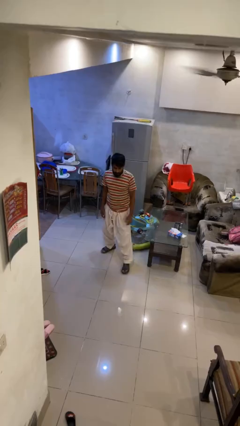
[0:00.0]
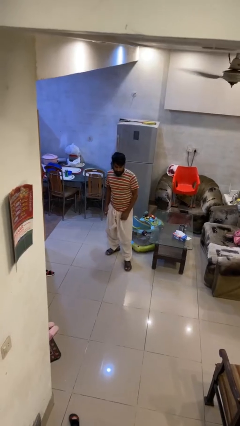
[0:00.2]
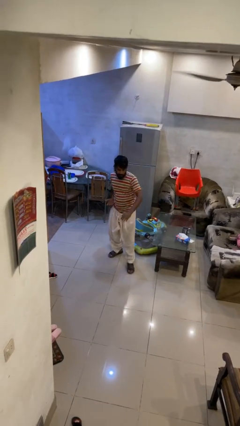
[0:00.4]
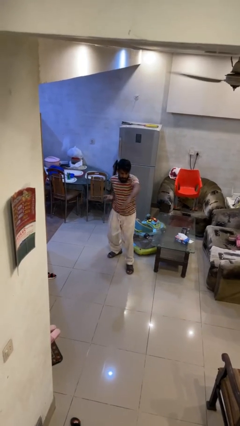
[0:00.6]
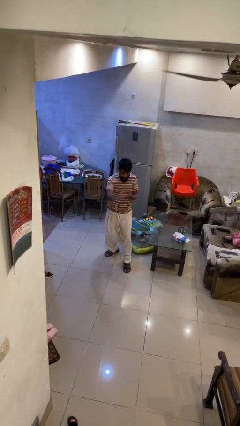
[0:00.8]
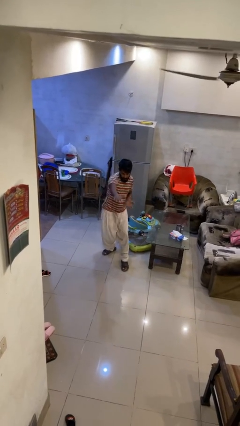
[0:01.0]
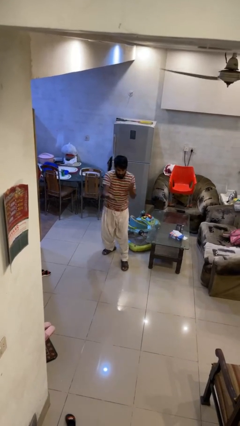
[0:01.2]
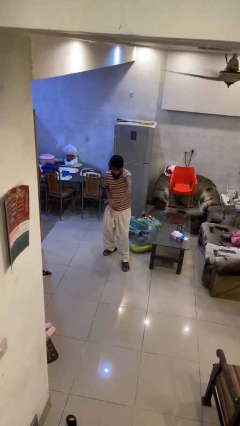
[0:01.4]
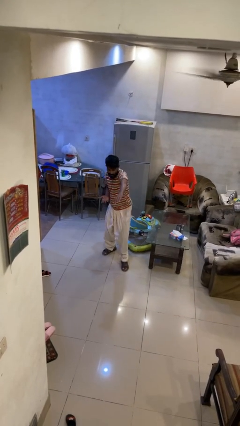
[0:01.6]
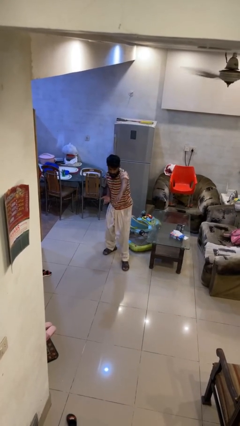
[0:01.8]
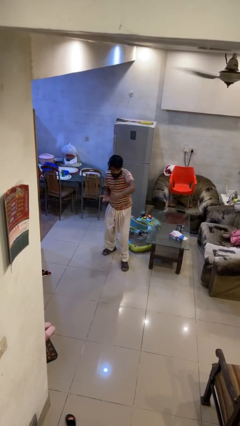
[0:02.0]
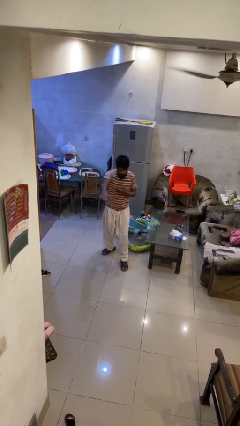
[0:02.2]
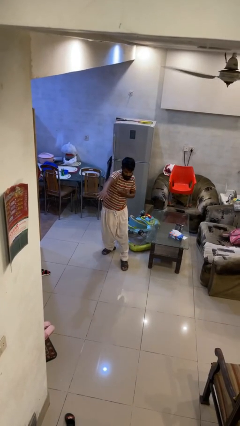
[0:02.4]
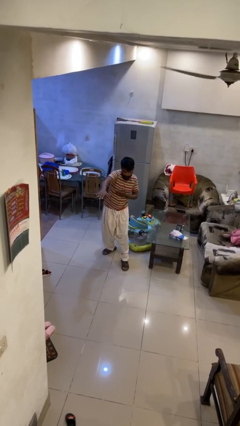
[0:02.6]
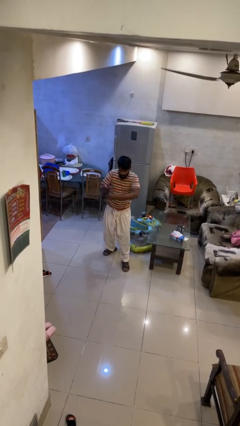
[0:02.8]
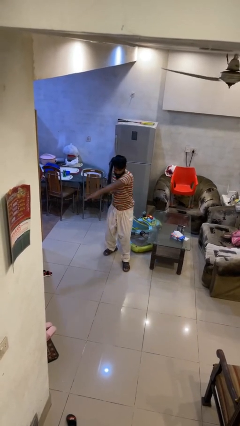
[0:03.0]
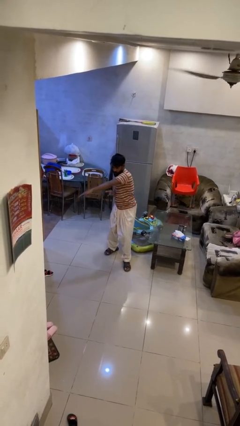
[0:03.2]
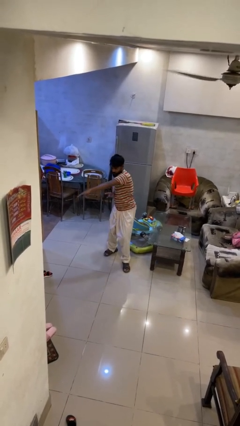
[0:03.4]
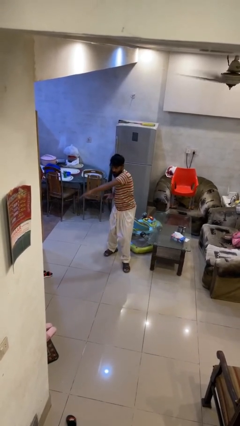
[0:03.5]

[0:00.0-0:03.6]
person karate chop

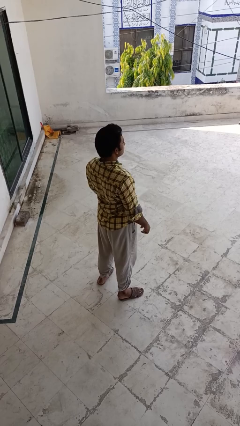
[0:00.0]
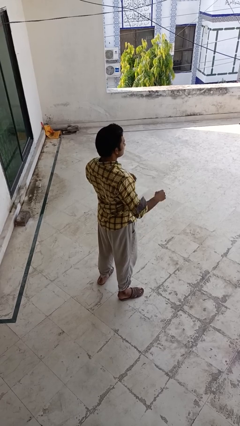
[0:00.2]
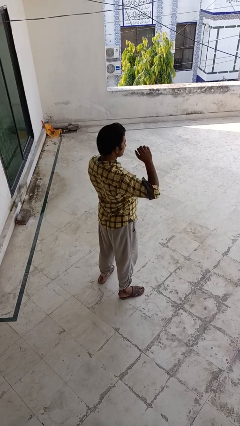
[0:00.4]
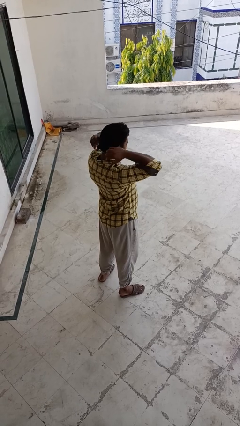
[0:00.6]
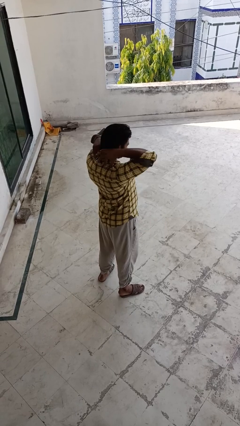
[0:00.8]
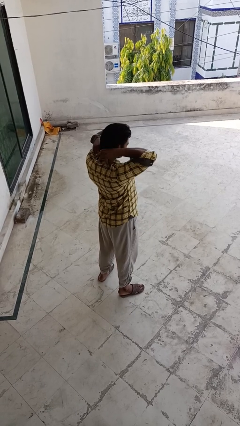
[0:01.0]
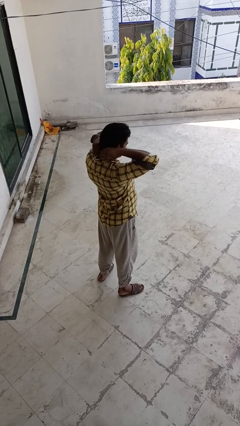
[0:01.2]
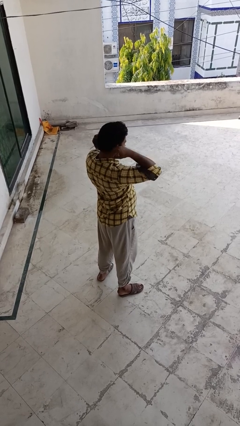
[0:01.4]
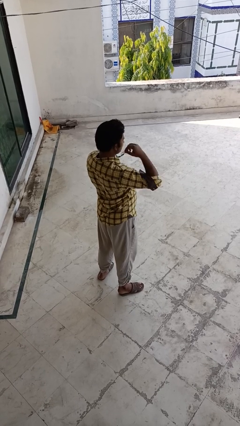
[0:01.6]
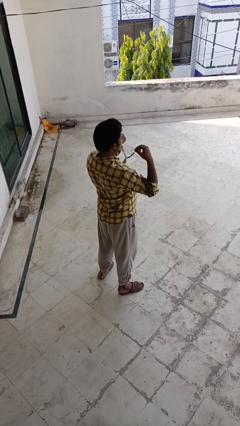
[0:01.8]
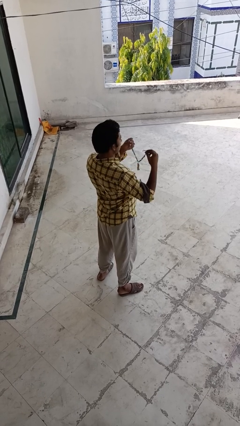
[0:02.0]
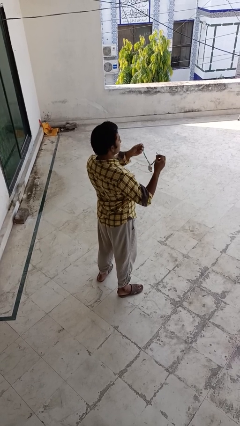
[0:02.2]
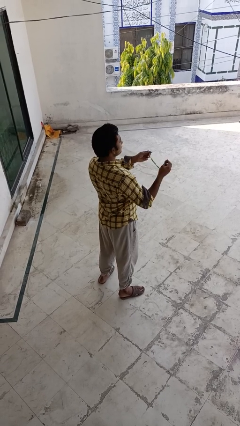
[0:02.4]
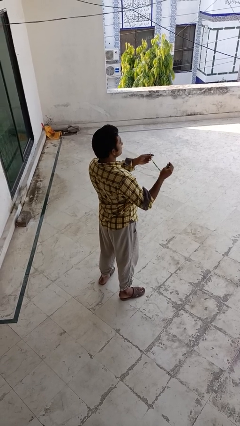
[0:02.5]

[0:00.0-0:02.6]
person takes off necklace

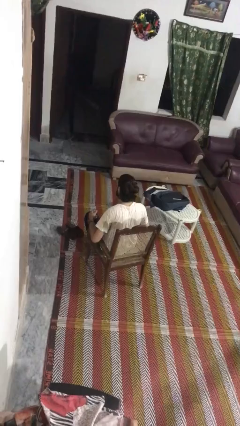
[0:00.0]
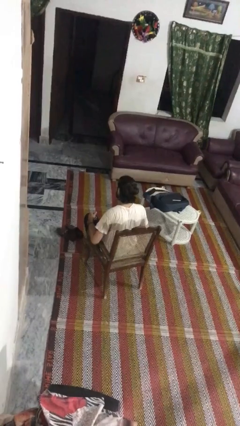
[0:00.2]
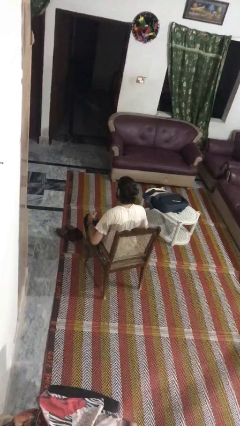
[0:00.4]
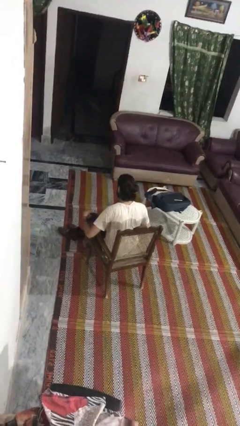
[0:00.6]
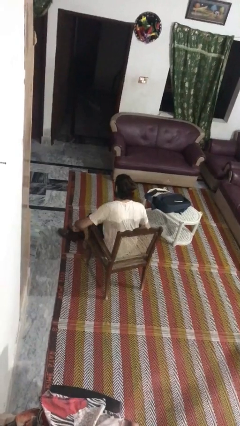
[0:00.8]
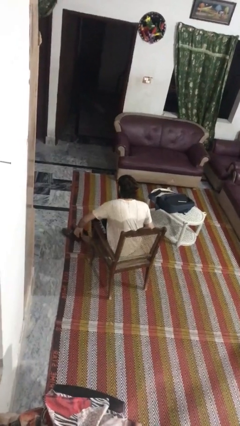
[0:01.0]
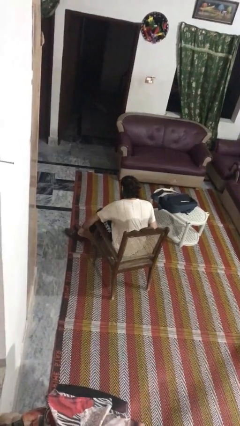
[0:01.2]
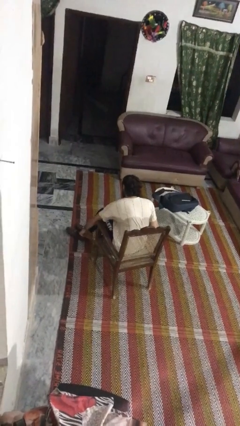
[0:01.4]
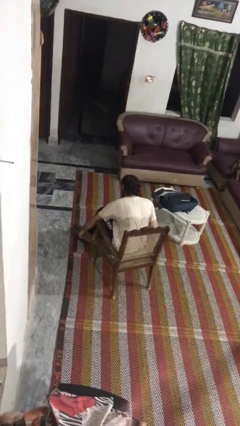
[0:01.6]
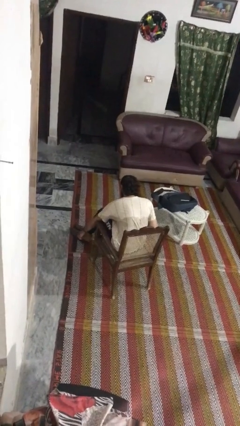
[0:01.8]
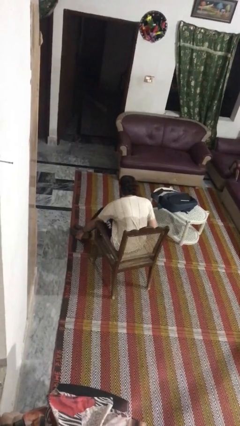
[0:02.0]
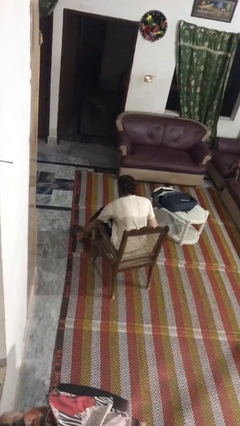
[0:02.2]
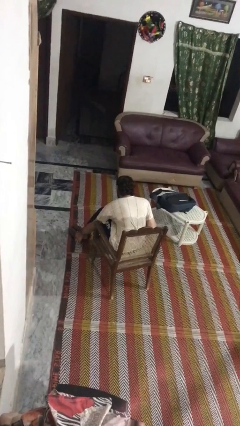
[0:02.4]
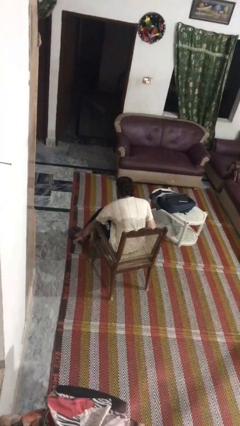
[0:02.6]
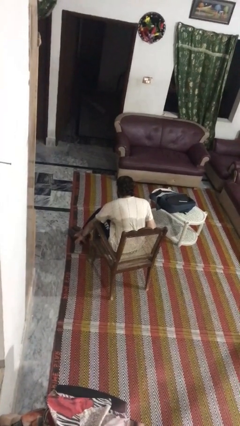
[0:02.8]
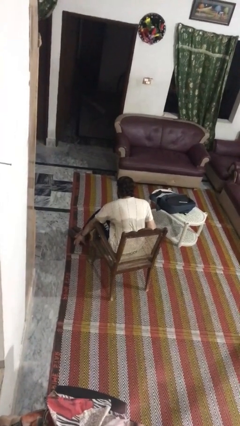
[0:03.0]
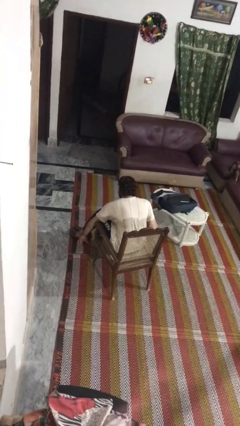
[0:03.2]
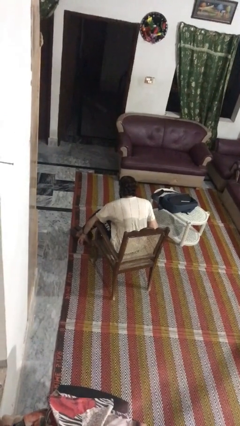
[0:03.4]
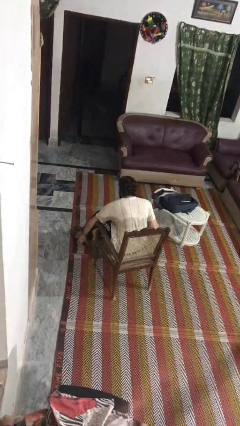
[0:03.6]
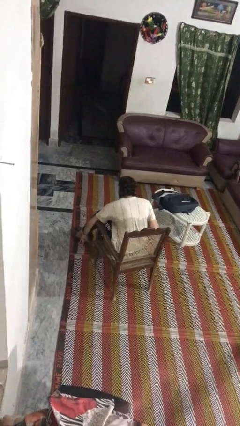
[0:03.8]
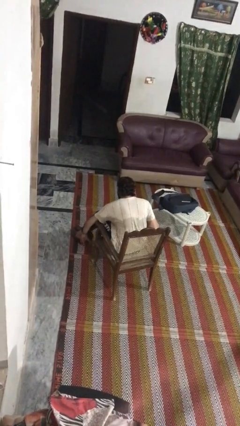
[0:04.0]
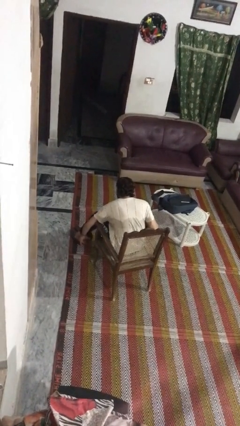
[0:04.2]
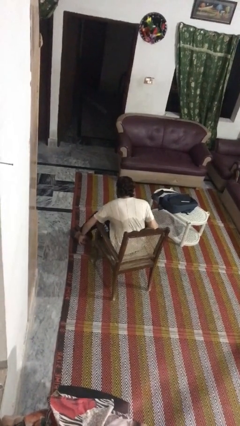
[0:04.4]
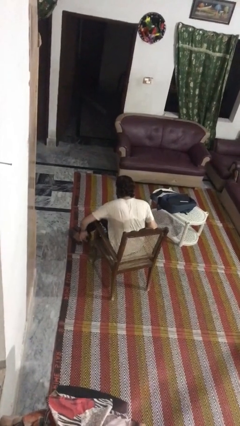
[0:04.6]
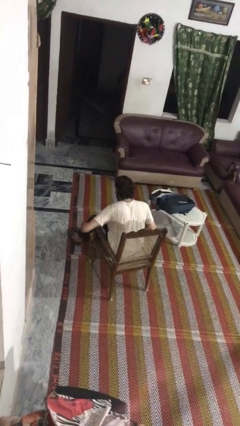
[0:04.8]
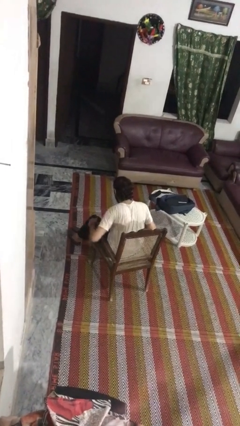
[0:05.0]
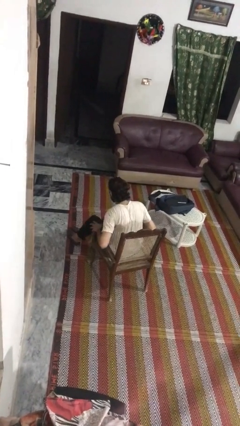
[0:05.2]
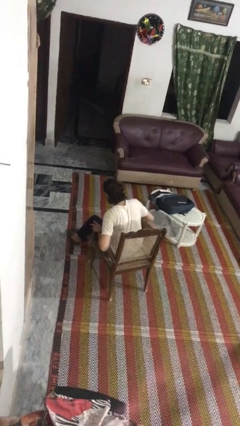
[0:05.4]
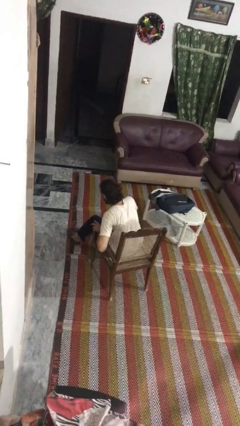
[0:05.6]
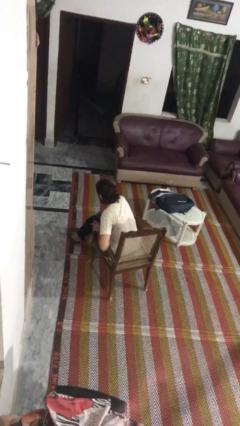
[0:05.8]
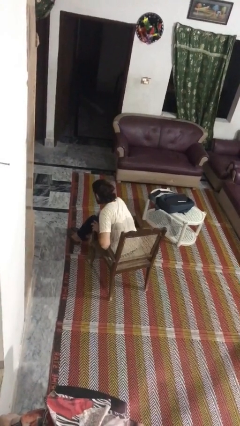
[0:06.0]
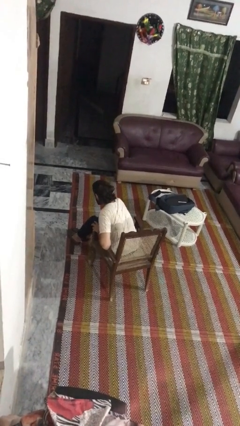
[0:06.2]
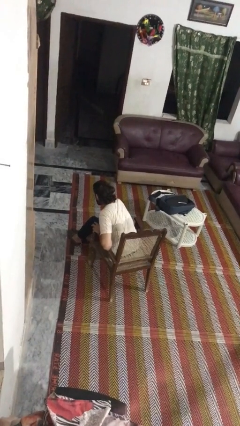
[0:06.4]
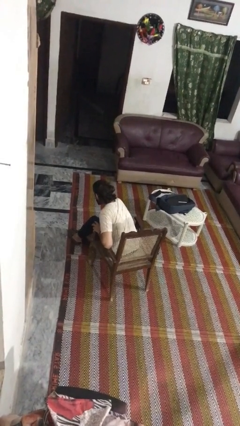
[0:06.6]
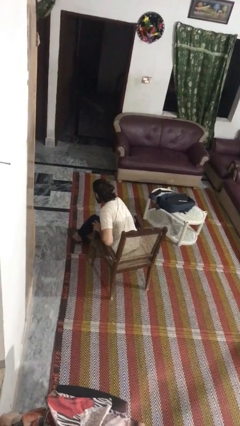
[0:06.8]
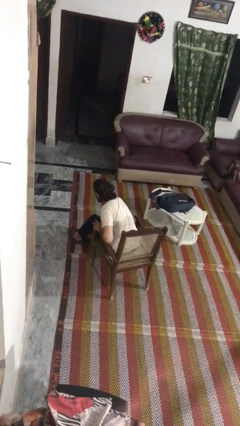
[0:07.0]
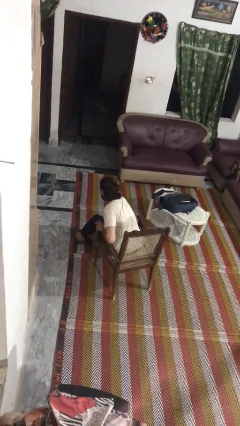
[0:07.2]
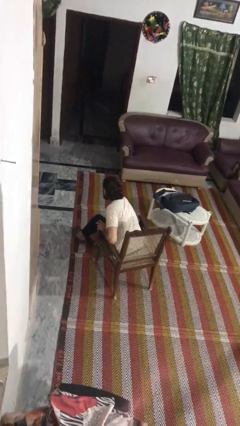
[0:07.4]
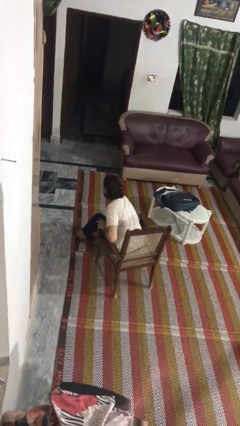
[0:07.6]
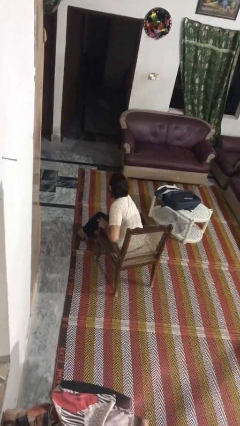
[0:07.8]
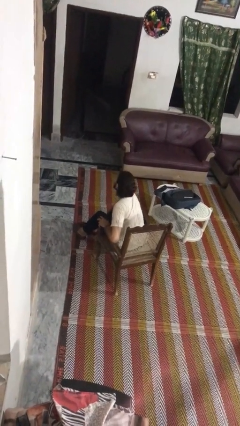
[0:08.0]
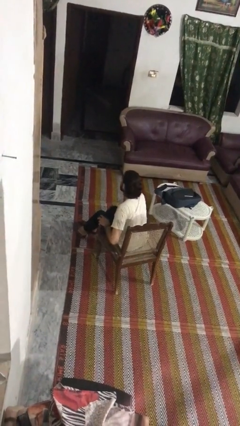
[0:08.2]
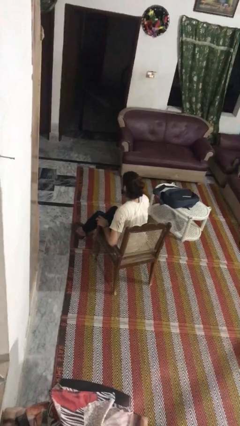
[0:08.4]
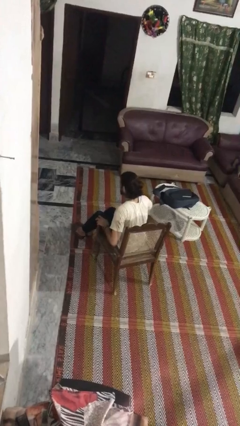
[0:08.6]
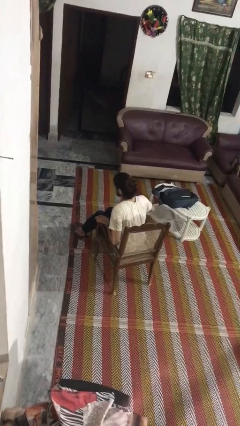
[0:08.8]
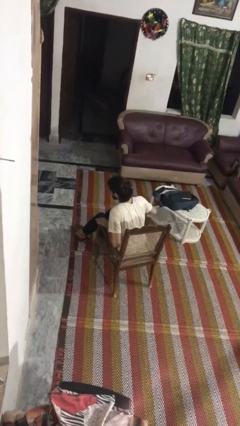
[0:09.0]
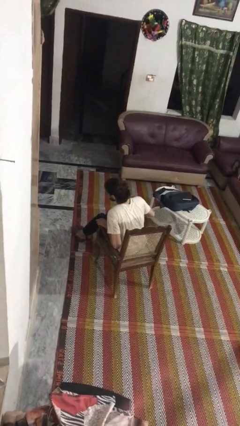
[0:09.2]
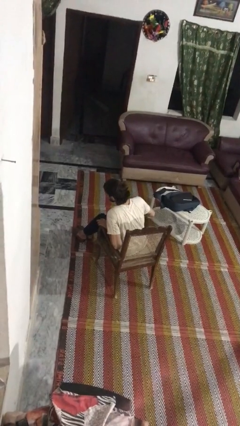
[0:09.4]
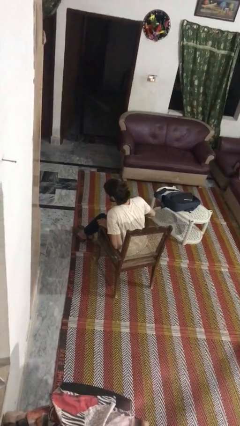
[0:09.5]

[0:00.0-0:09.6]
person puts on shoes

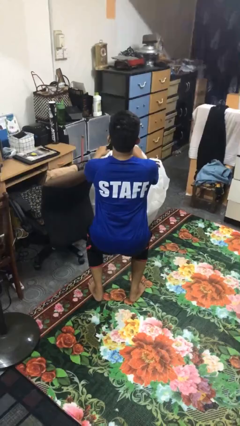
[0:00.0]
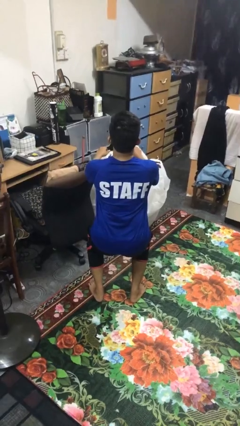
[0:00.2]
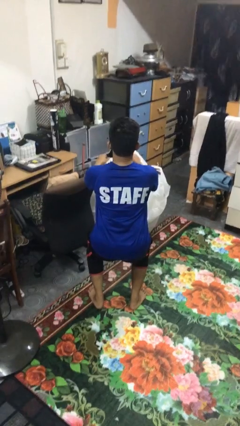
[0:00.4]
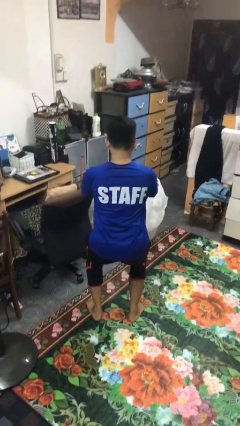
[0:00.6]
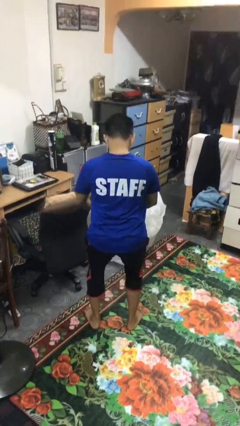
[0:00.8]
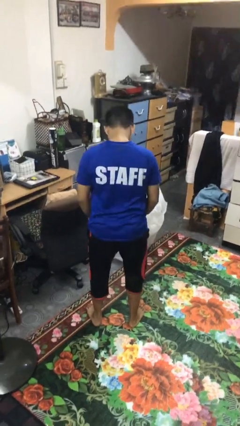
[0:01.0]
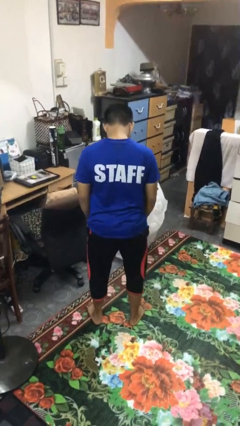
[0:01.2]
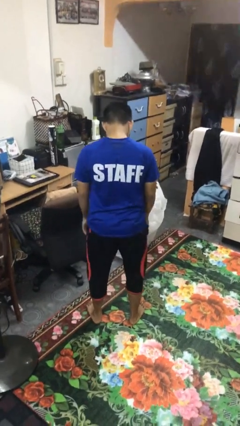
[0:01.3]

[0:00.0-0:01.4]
person stands up

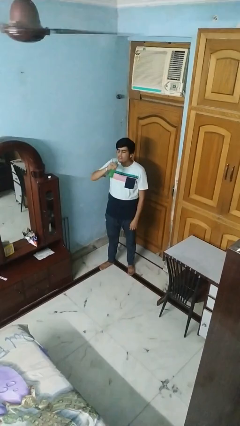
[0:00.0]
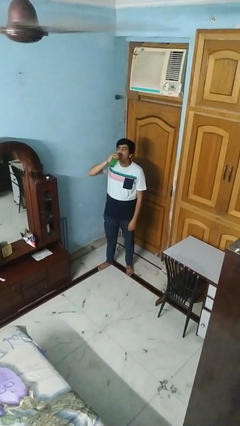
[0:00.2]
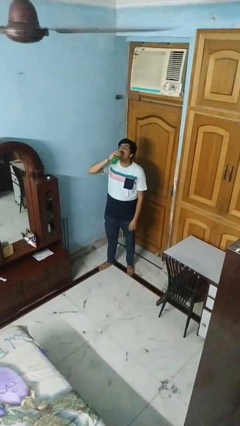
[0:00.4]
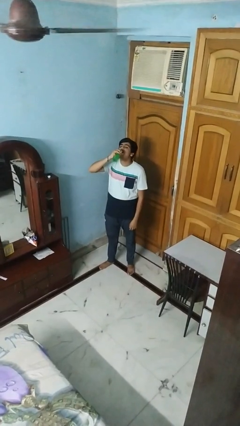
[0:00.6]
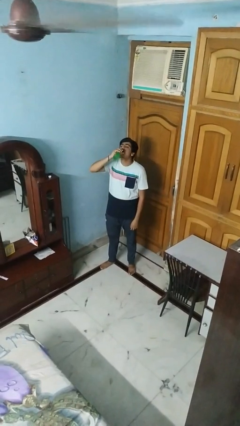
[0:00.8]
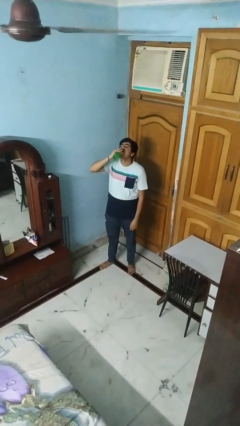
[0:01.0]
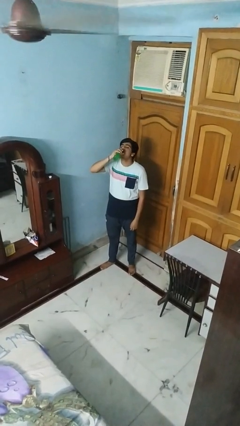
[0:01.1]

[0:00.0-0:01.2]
person drinks from bottle
